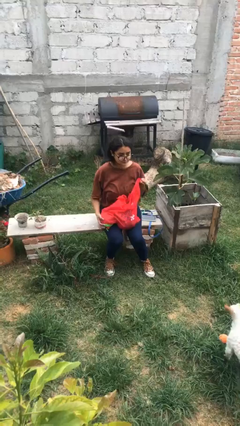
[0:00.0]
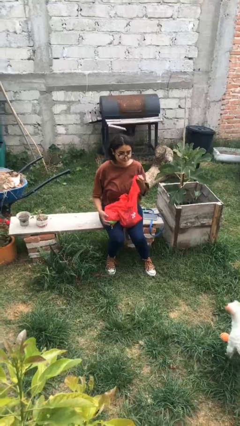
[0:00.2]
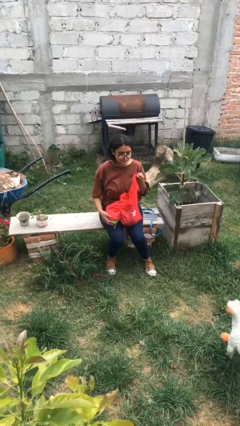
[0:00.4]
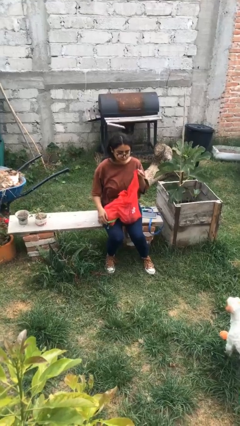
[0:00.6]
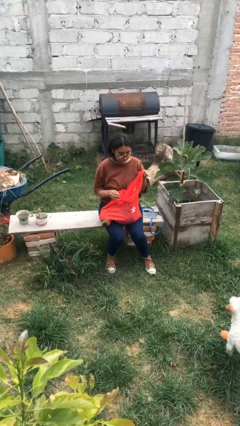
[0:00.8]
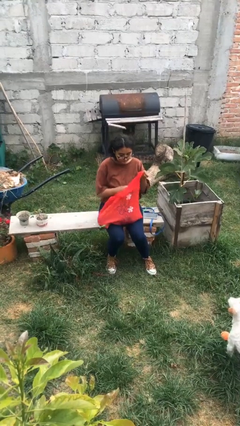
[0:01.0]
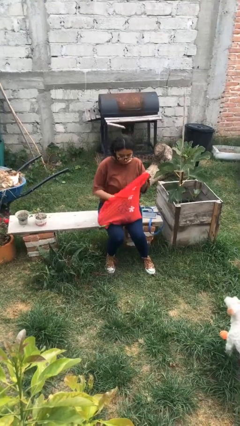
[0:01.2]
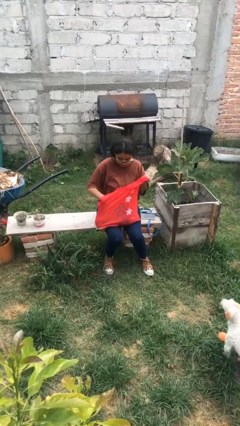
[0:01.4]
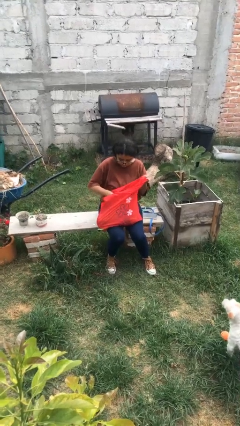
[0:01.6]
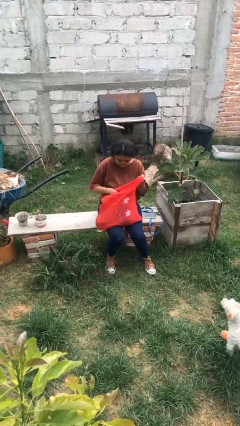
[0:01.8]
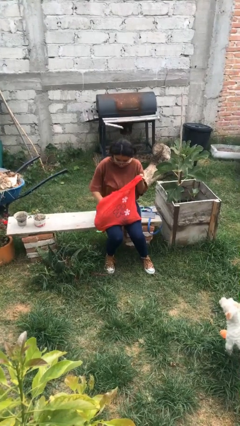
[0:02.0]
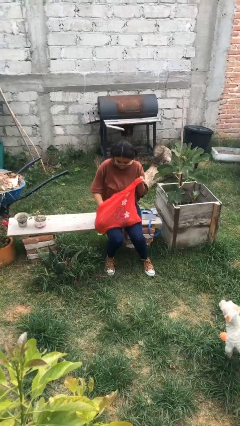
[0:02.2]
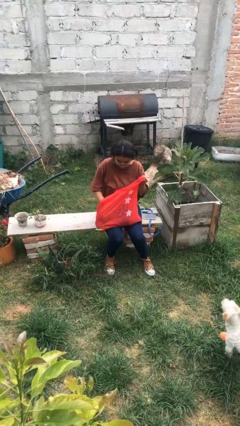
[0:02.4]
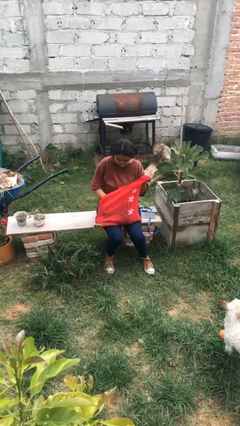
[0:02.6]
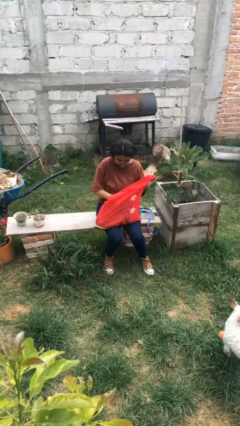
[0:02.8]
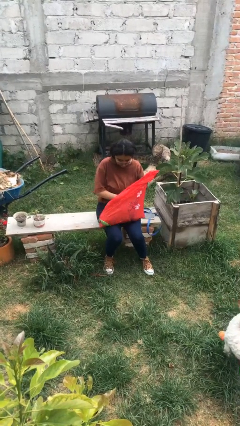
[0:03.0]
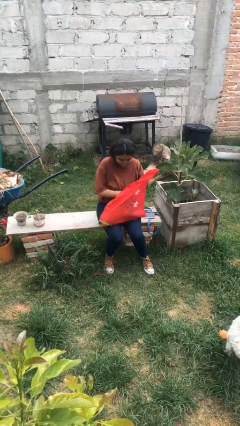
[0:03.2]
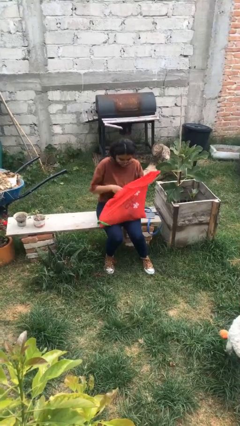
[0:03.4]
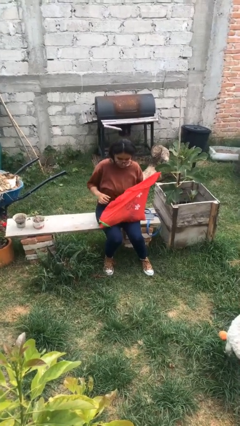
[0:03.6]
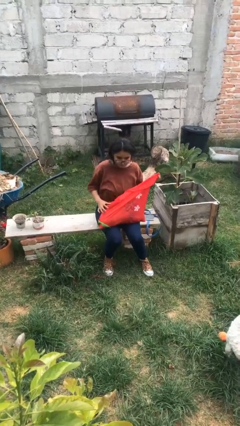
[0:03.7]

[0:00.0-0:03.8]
person searches in bag

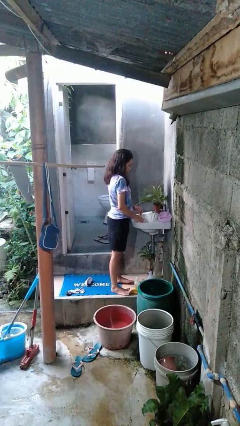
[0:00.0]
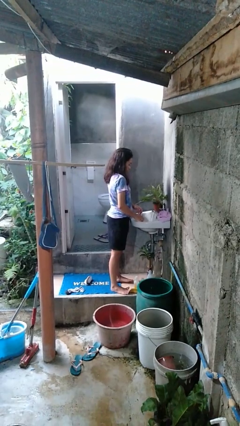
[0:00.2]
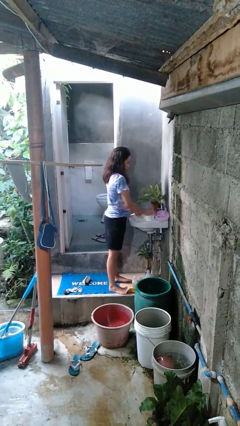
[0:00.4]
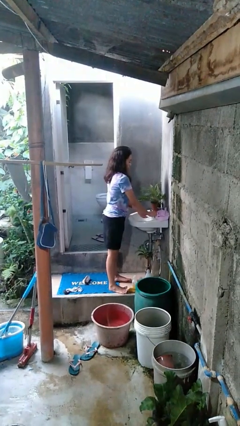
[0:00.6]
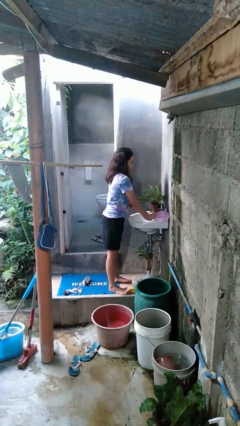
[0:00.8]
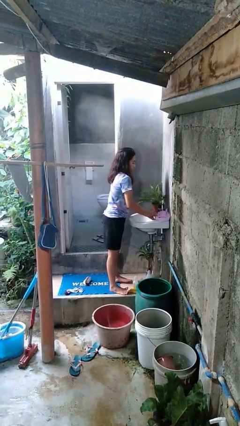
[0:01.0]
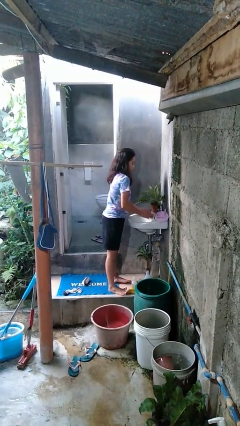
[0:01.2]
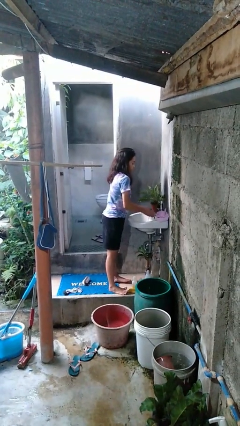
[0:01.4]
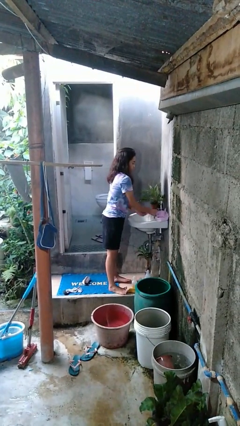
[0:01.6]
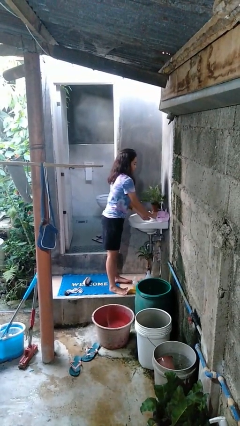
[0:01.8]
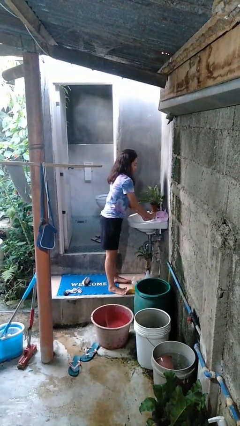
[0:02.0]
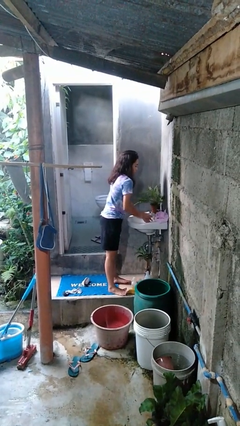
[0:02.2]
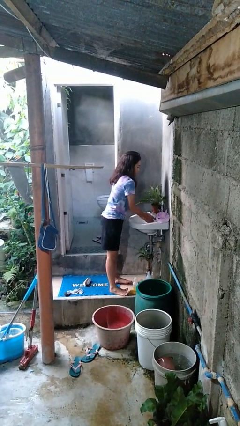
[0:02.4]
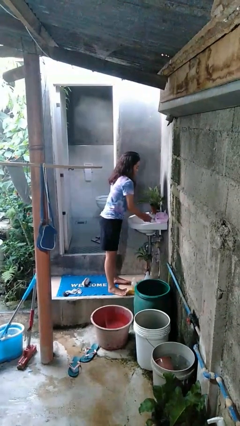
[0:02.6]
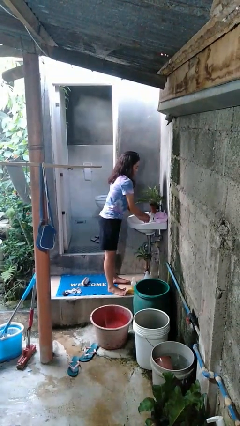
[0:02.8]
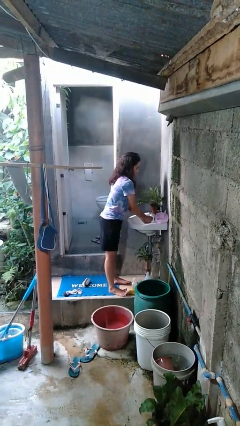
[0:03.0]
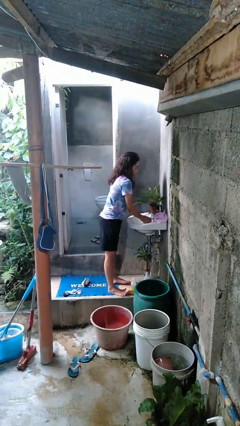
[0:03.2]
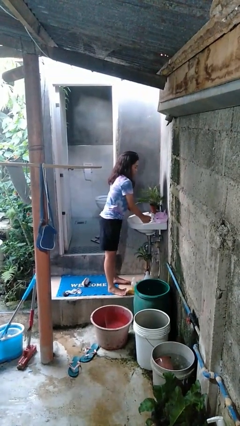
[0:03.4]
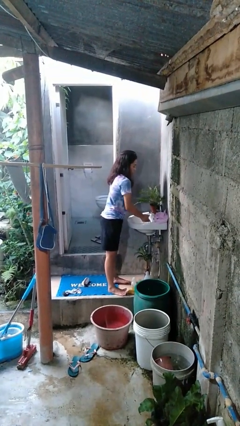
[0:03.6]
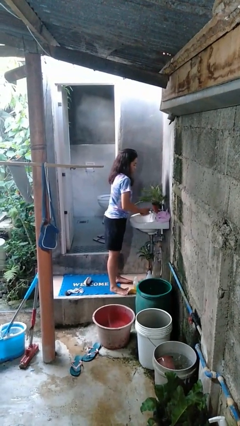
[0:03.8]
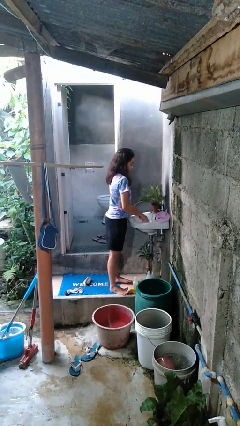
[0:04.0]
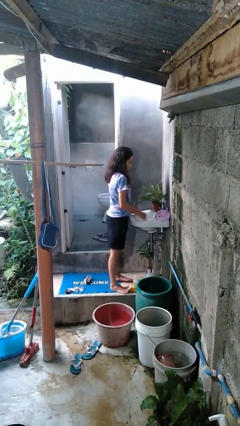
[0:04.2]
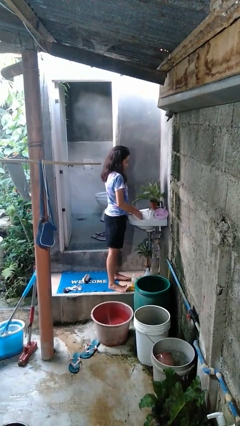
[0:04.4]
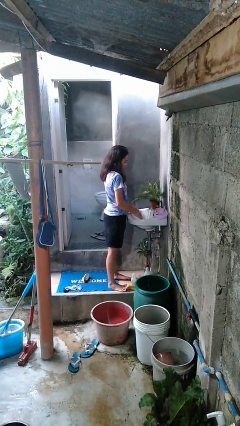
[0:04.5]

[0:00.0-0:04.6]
person washes hands

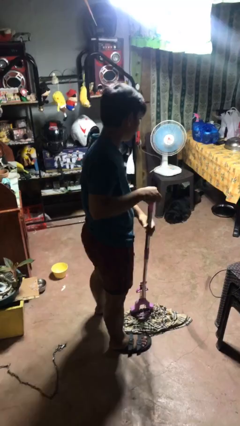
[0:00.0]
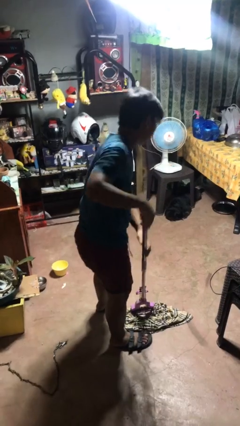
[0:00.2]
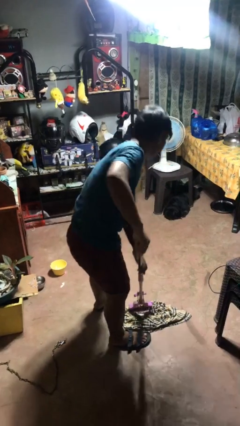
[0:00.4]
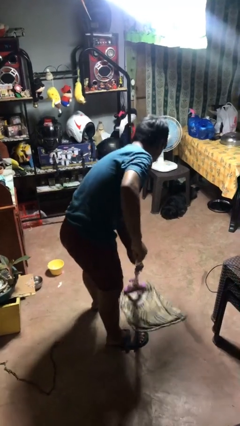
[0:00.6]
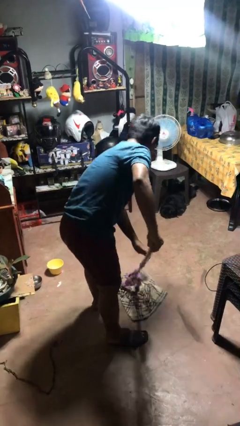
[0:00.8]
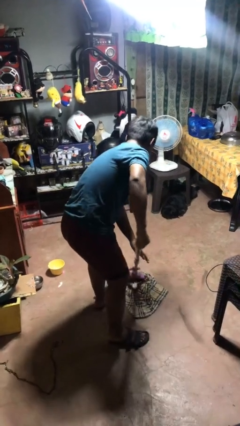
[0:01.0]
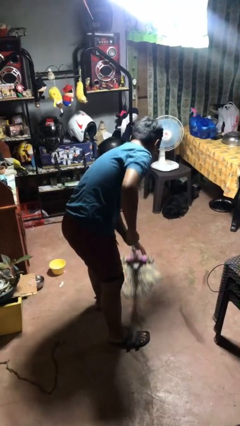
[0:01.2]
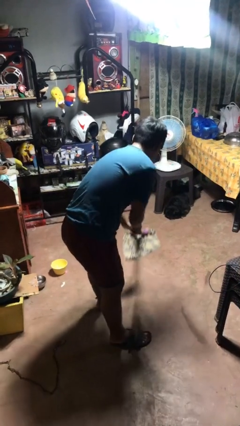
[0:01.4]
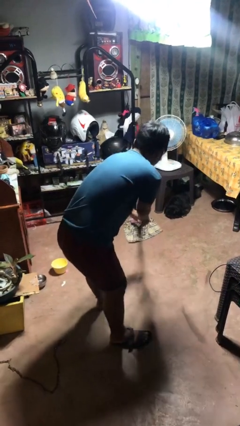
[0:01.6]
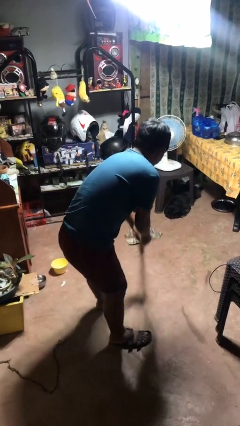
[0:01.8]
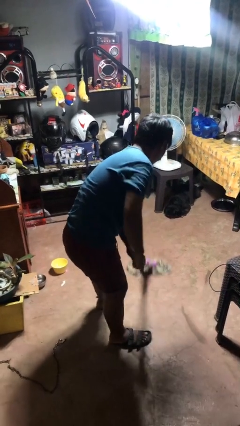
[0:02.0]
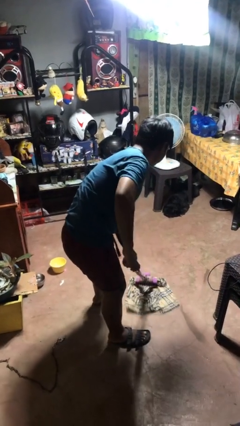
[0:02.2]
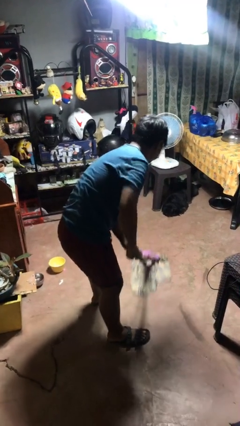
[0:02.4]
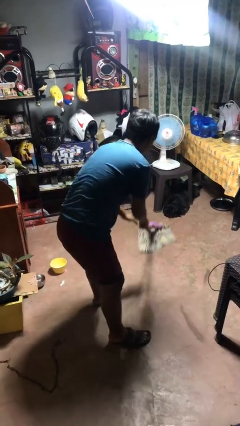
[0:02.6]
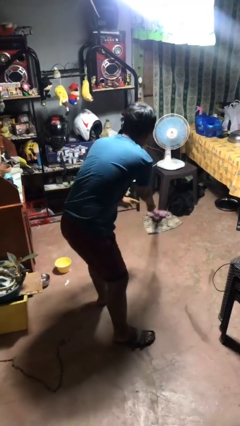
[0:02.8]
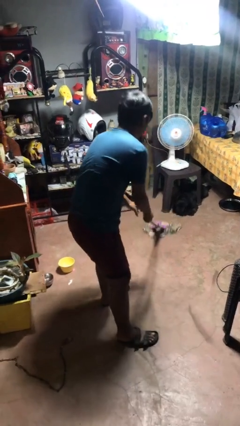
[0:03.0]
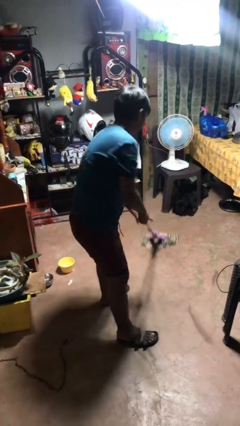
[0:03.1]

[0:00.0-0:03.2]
person mops

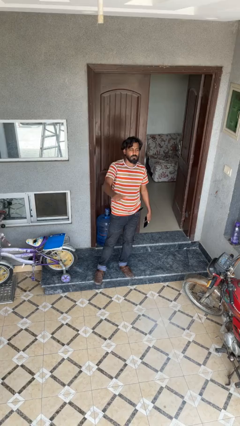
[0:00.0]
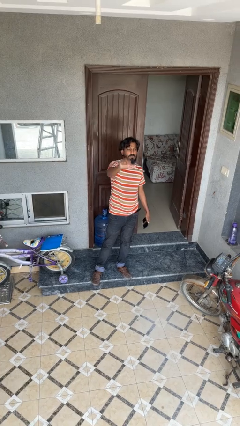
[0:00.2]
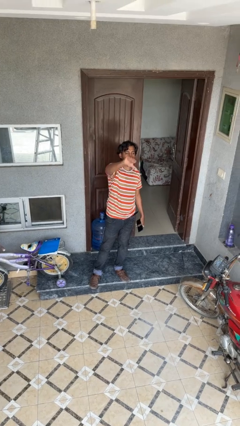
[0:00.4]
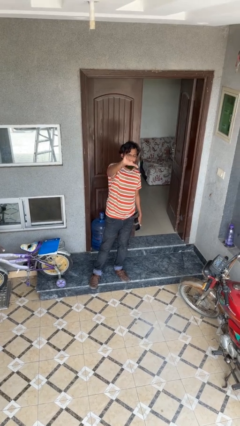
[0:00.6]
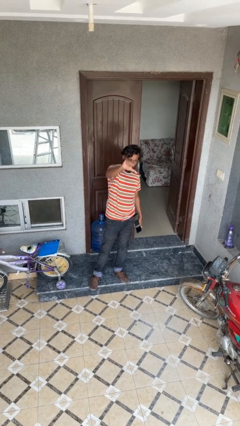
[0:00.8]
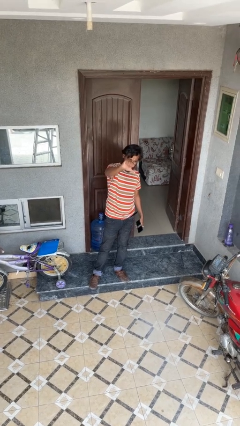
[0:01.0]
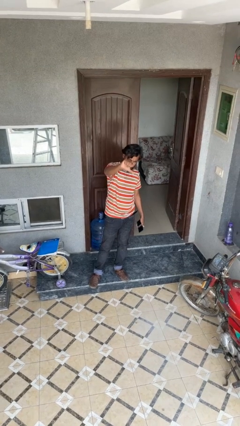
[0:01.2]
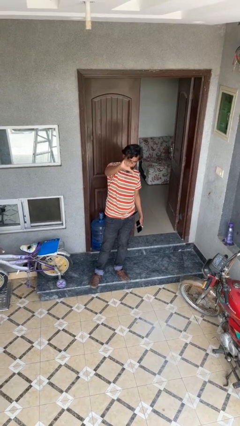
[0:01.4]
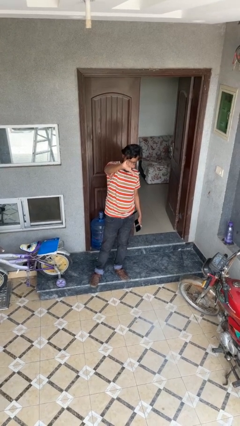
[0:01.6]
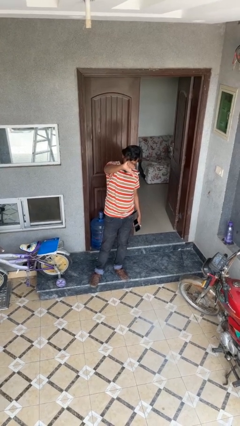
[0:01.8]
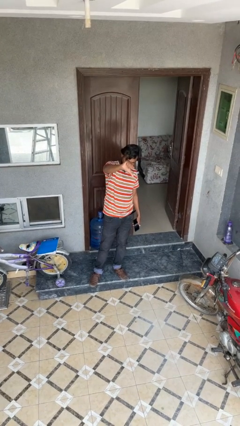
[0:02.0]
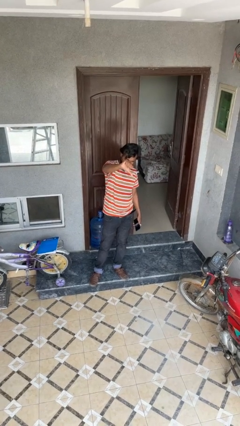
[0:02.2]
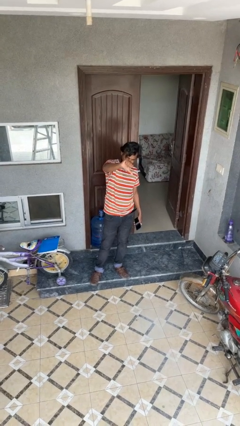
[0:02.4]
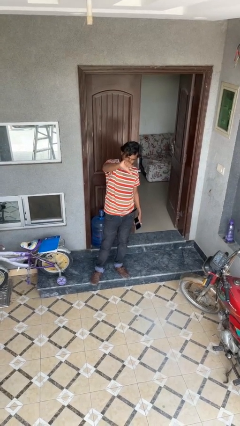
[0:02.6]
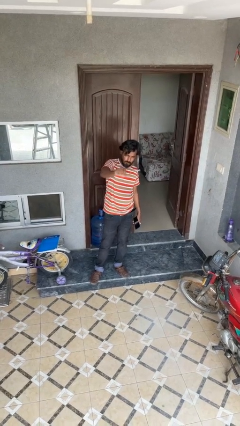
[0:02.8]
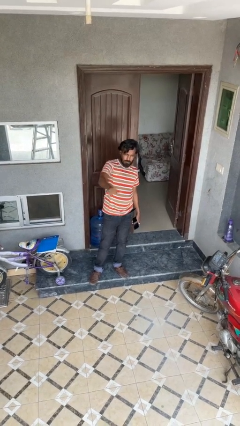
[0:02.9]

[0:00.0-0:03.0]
person gestures thumbs down

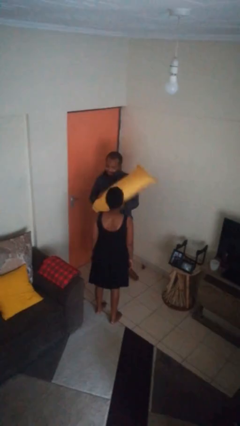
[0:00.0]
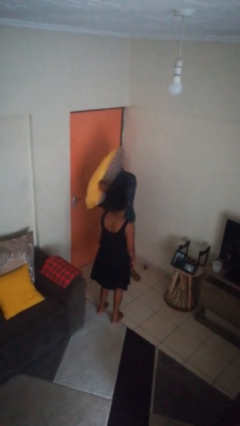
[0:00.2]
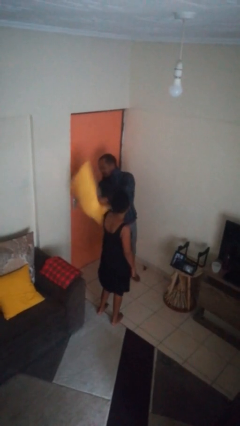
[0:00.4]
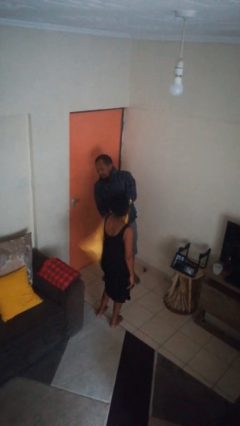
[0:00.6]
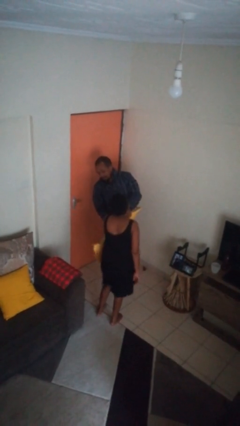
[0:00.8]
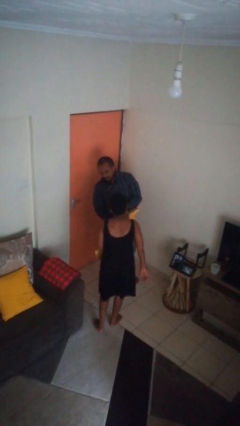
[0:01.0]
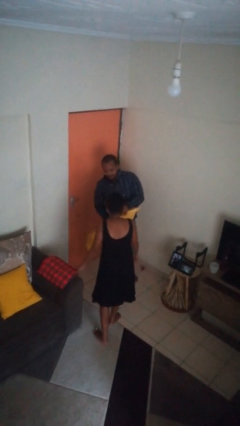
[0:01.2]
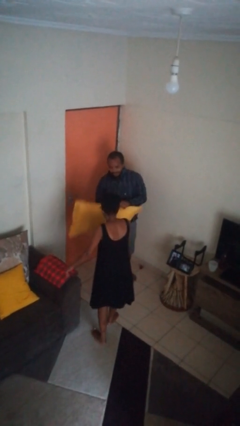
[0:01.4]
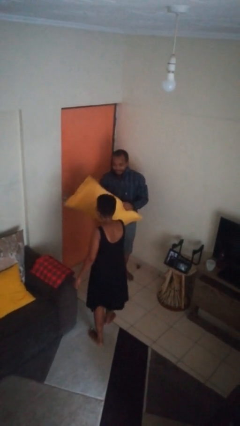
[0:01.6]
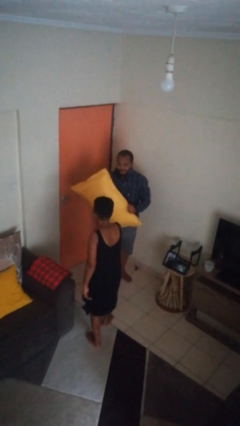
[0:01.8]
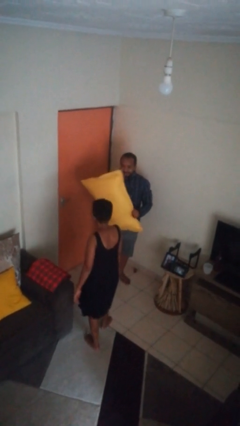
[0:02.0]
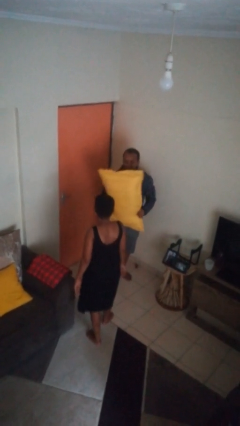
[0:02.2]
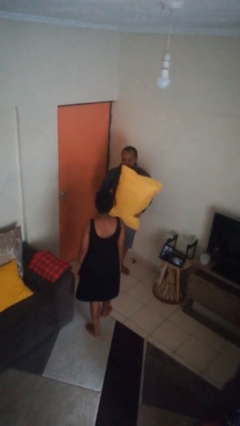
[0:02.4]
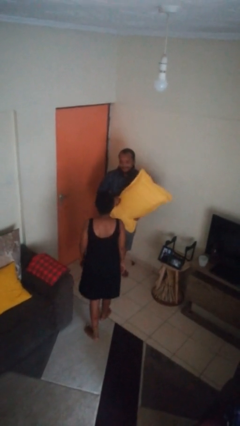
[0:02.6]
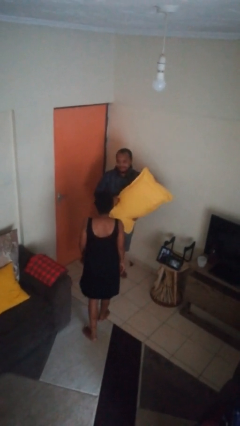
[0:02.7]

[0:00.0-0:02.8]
person hits person with pillow

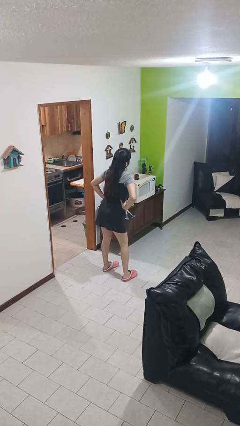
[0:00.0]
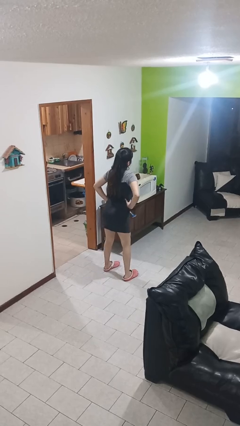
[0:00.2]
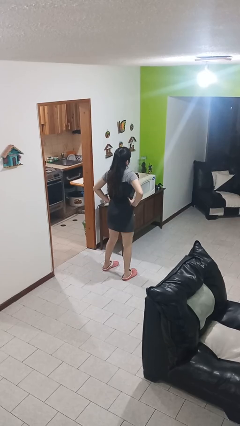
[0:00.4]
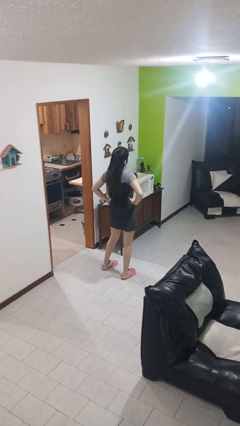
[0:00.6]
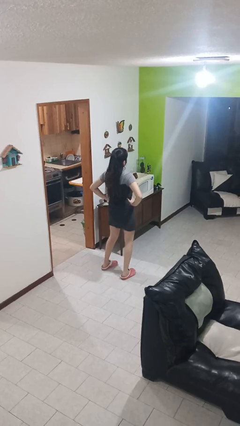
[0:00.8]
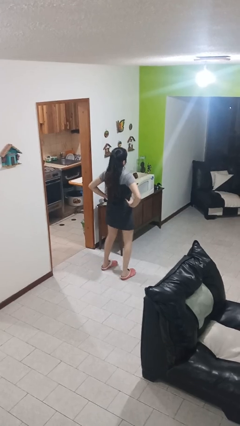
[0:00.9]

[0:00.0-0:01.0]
person wiggles hips
